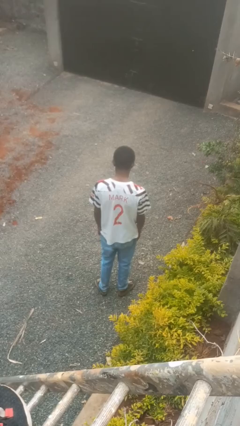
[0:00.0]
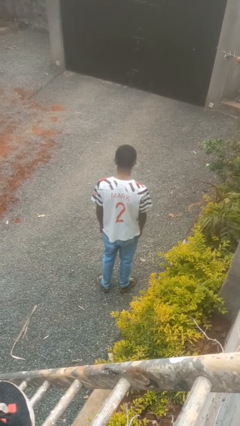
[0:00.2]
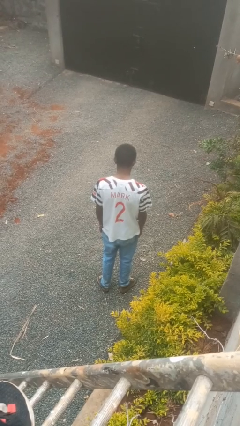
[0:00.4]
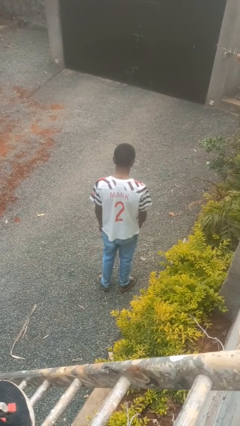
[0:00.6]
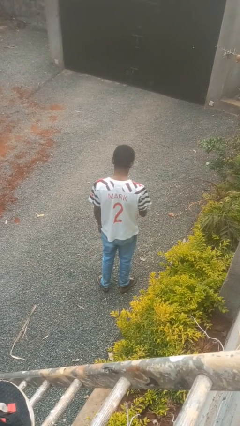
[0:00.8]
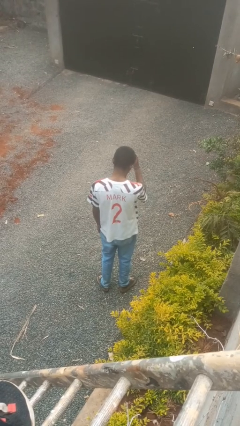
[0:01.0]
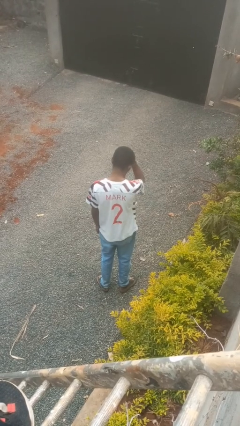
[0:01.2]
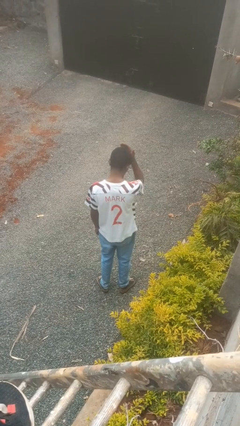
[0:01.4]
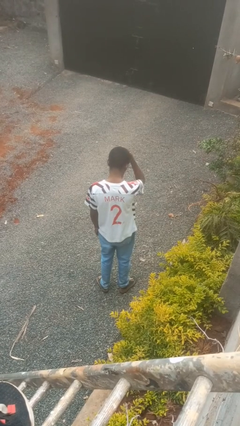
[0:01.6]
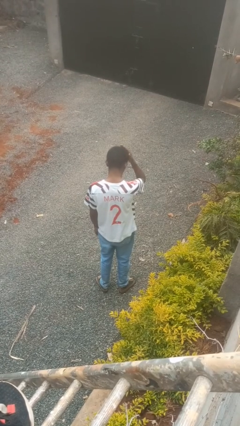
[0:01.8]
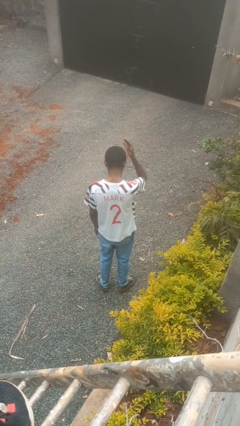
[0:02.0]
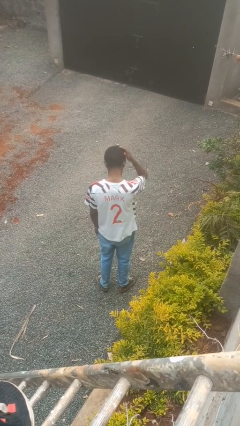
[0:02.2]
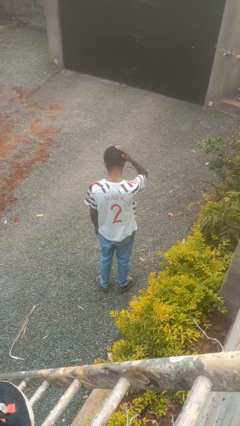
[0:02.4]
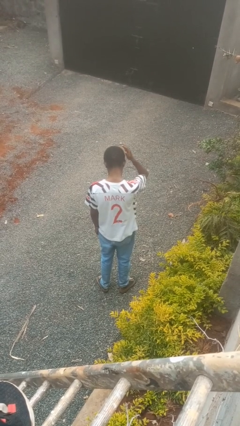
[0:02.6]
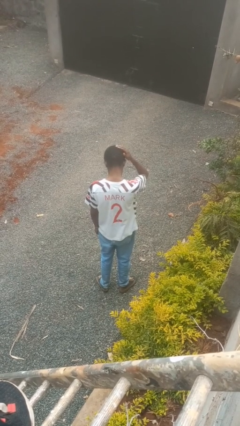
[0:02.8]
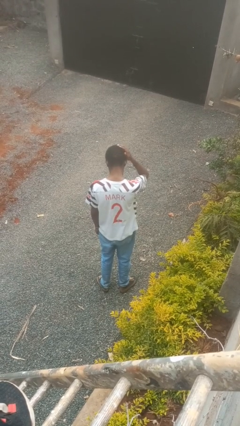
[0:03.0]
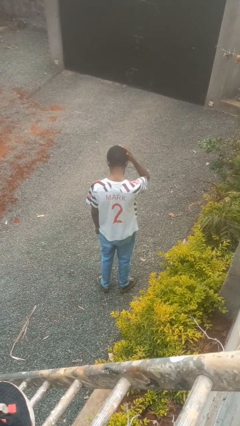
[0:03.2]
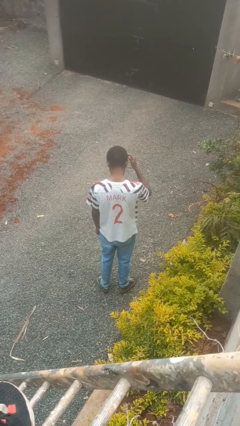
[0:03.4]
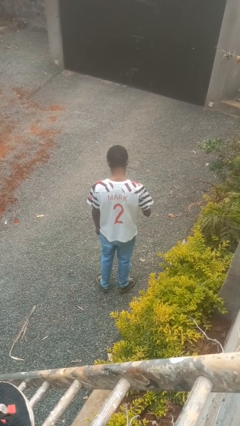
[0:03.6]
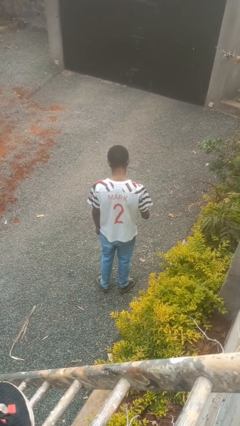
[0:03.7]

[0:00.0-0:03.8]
person pats head

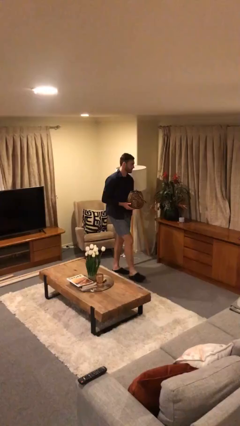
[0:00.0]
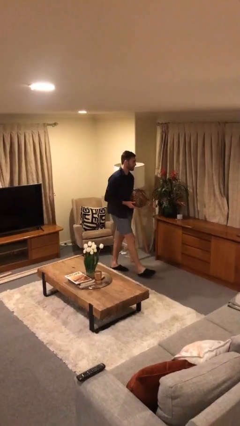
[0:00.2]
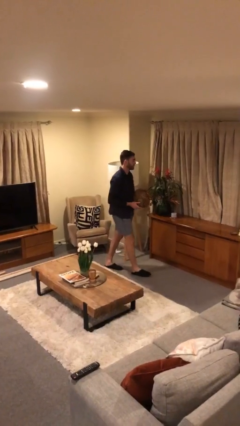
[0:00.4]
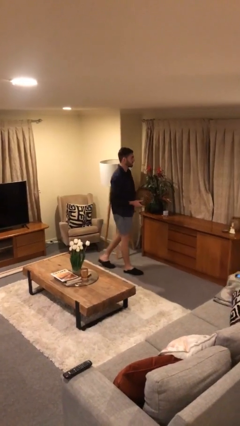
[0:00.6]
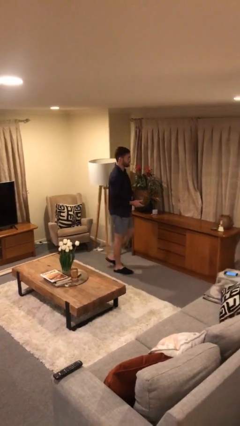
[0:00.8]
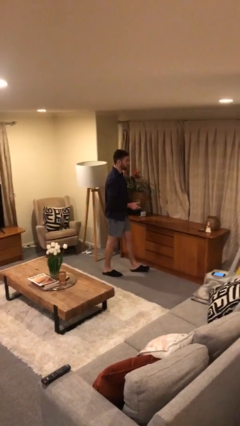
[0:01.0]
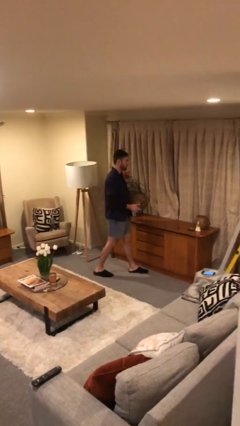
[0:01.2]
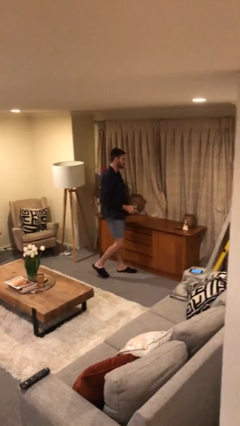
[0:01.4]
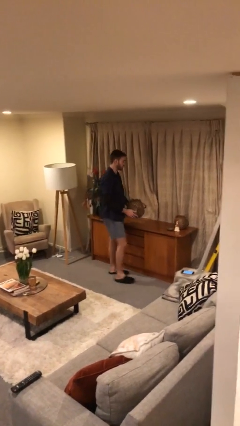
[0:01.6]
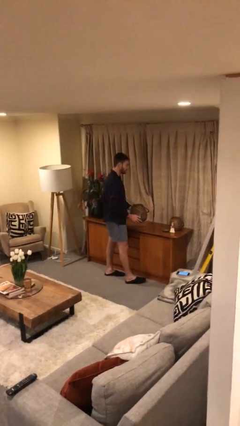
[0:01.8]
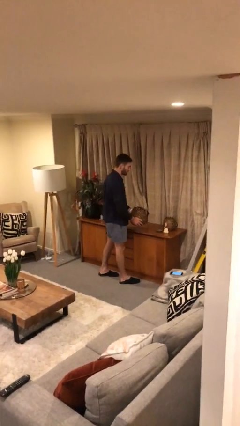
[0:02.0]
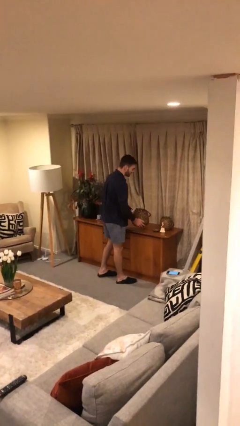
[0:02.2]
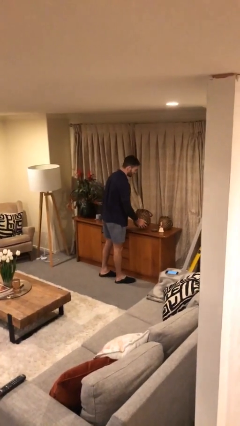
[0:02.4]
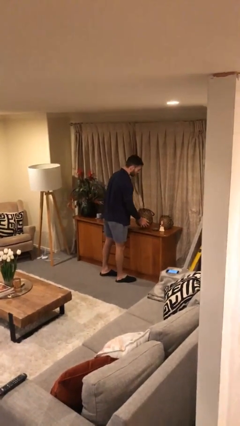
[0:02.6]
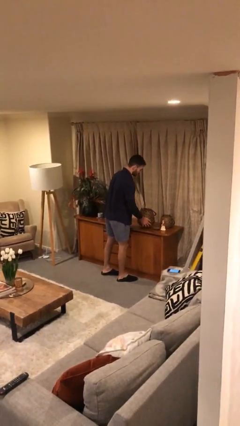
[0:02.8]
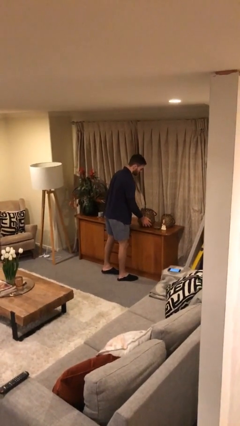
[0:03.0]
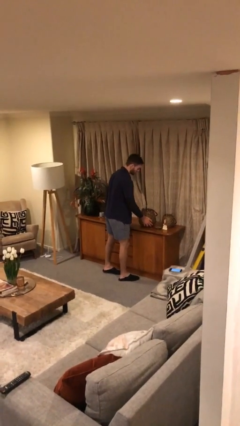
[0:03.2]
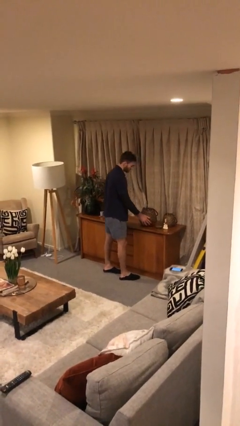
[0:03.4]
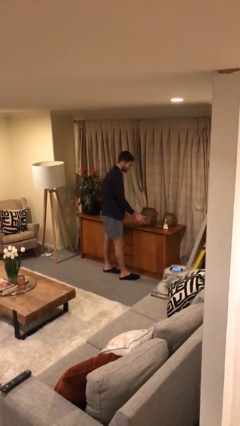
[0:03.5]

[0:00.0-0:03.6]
person puts down object on table

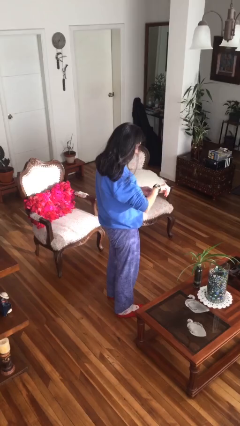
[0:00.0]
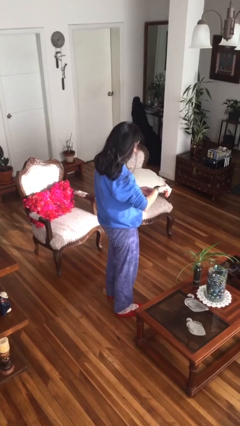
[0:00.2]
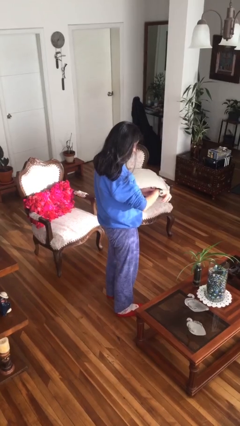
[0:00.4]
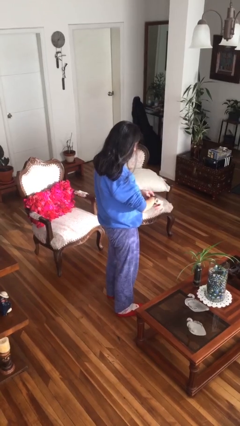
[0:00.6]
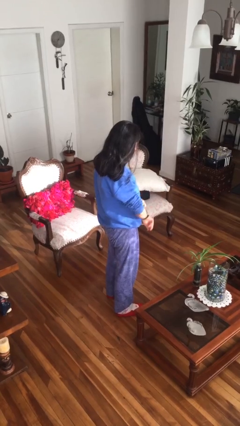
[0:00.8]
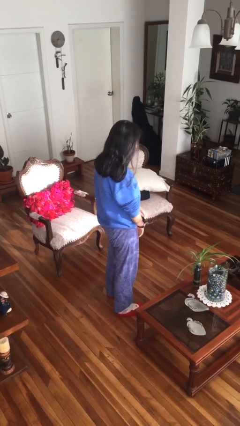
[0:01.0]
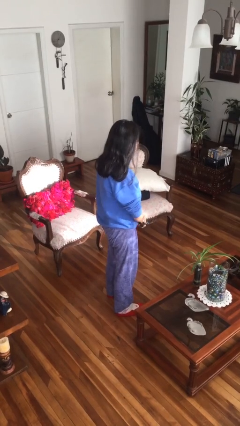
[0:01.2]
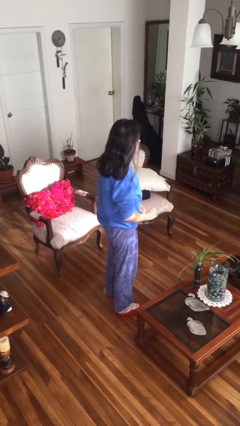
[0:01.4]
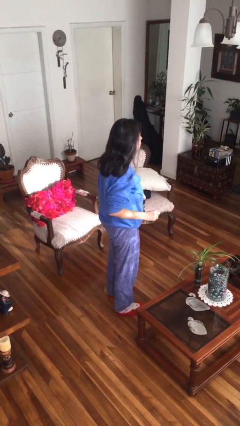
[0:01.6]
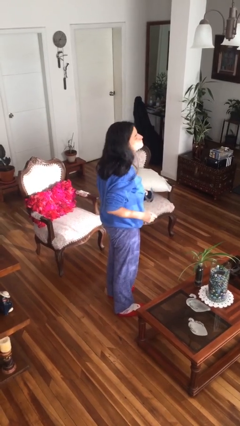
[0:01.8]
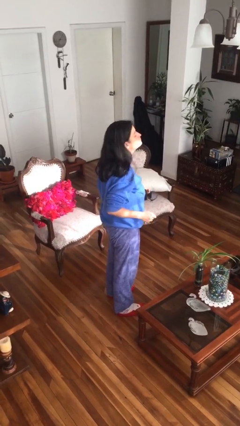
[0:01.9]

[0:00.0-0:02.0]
person takes off wristwatch

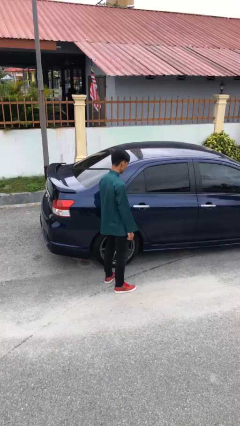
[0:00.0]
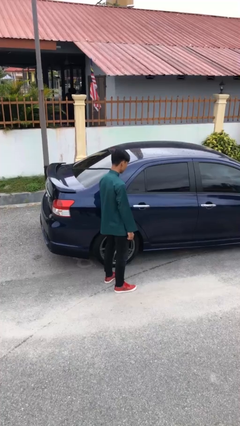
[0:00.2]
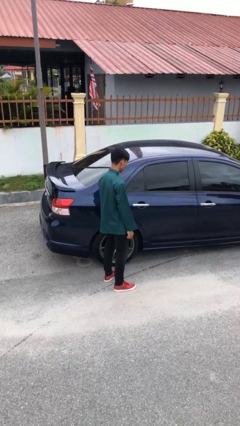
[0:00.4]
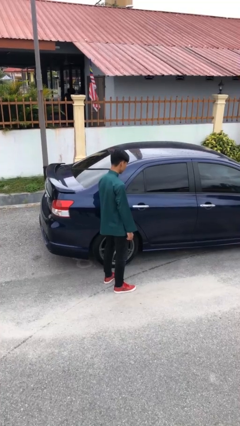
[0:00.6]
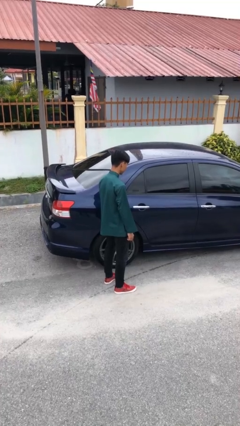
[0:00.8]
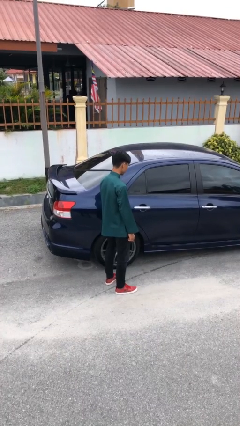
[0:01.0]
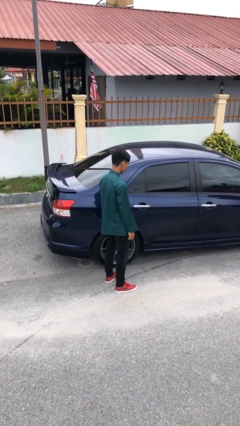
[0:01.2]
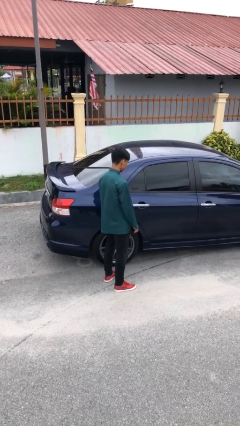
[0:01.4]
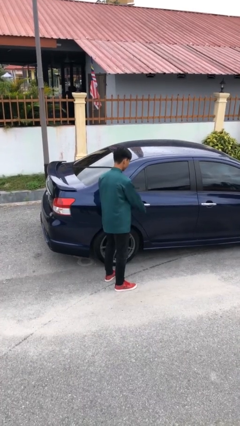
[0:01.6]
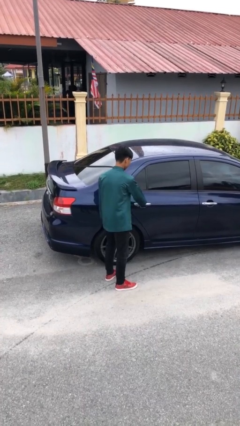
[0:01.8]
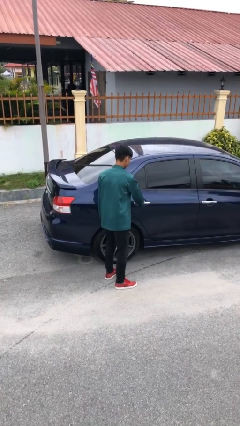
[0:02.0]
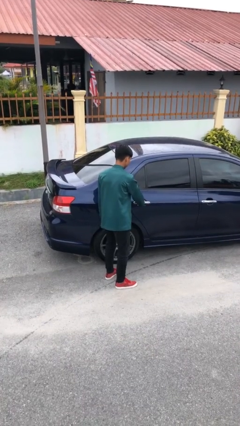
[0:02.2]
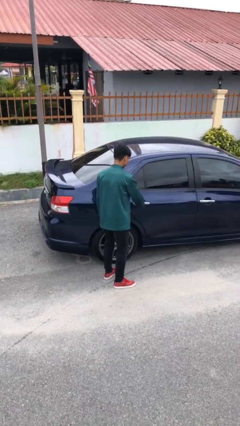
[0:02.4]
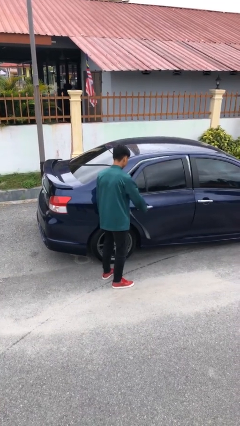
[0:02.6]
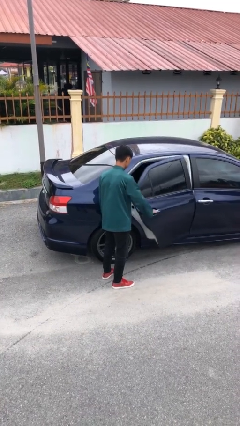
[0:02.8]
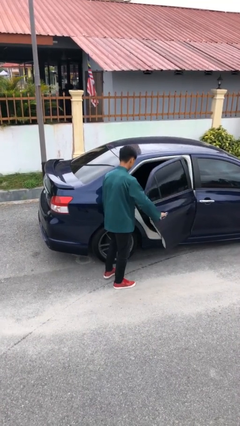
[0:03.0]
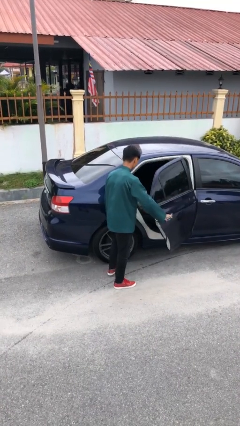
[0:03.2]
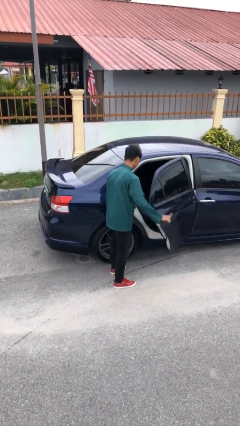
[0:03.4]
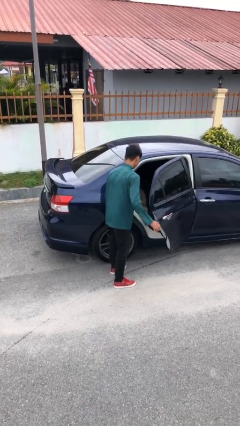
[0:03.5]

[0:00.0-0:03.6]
person opens car door

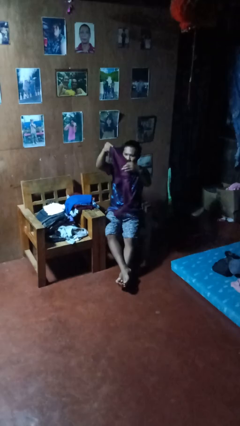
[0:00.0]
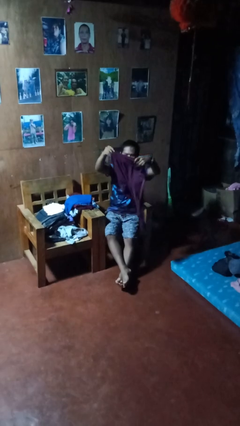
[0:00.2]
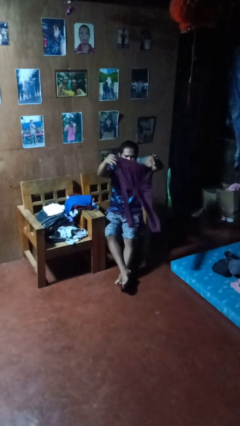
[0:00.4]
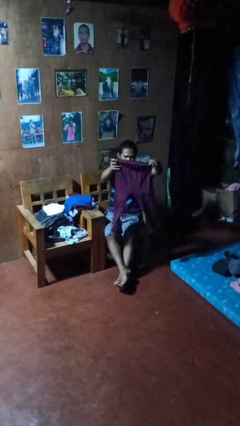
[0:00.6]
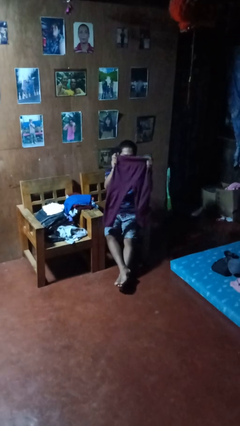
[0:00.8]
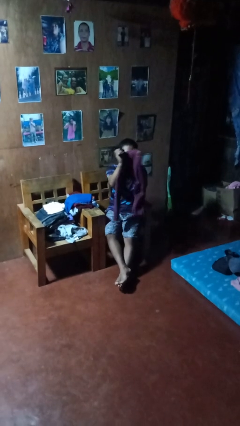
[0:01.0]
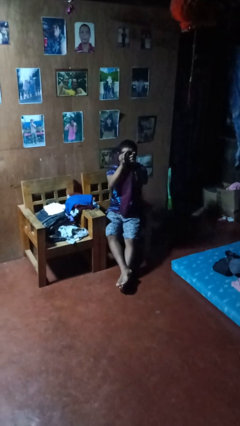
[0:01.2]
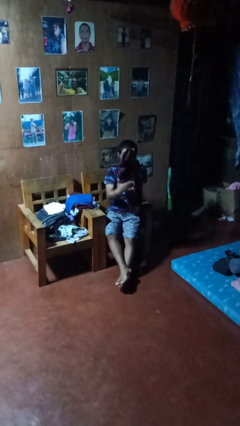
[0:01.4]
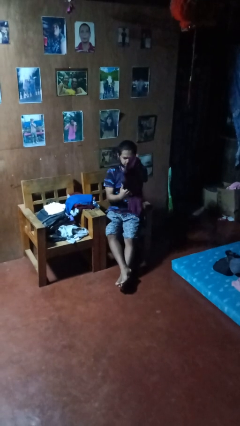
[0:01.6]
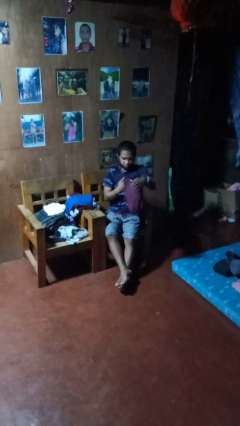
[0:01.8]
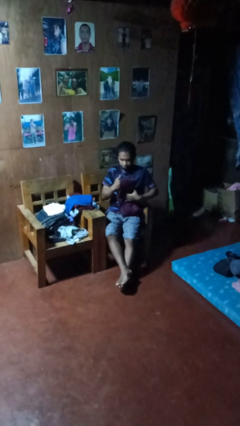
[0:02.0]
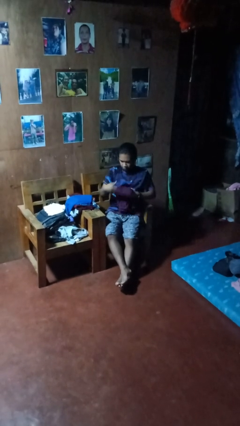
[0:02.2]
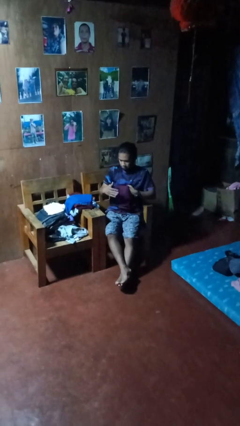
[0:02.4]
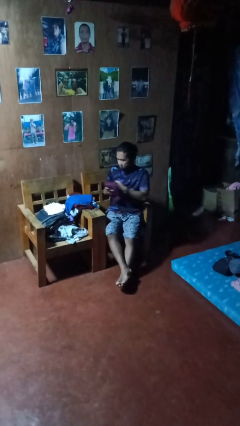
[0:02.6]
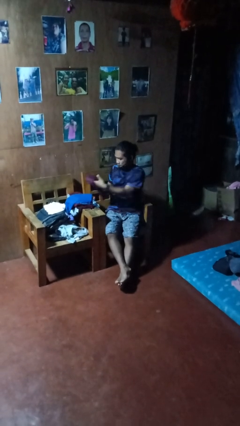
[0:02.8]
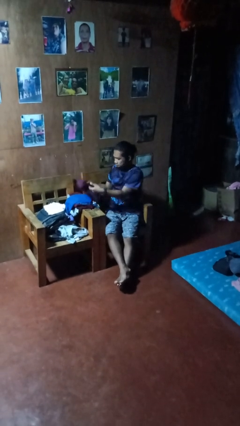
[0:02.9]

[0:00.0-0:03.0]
person folds pants

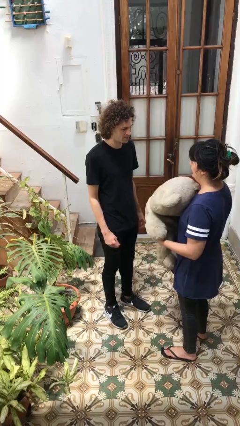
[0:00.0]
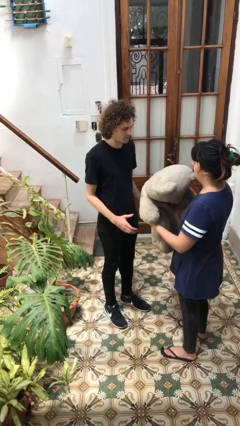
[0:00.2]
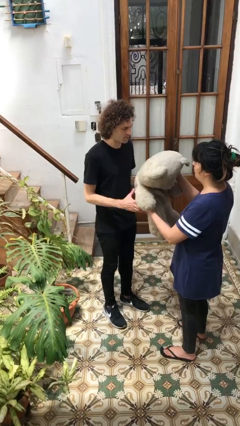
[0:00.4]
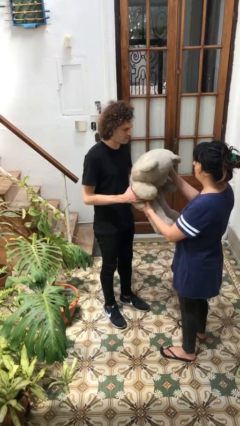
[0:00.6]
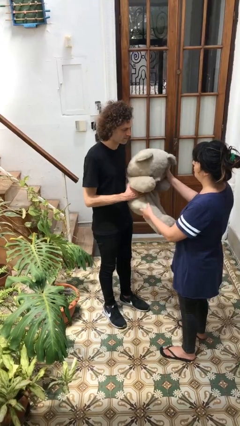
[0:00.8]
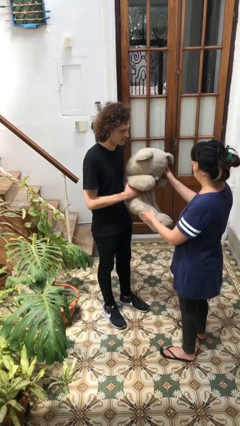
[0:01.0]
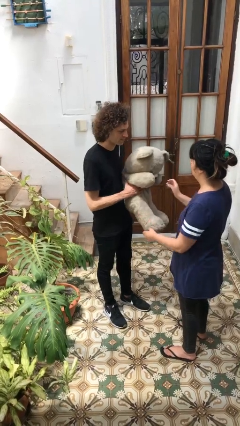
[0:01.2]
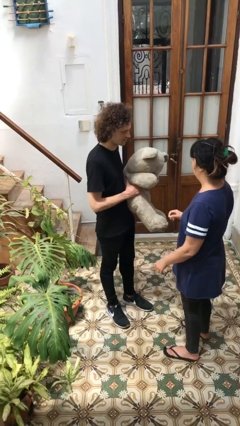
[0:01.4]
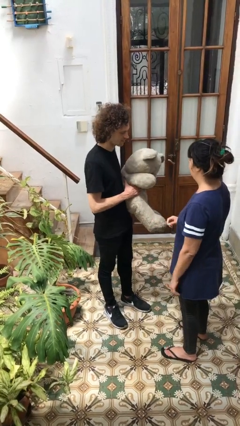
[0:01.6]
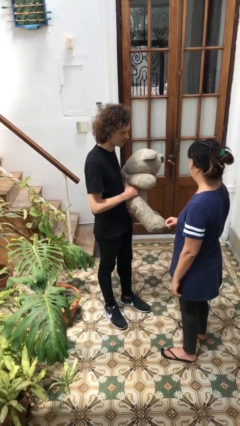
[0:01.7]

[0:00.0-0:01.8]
person transfers object to person
